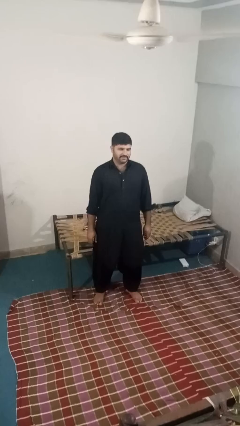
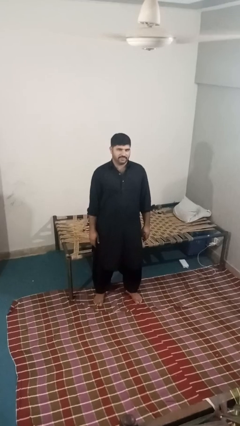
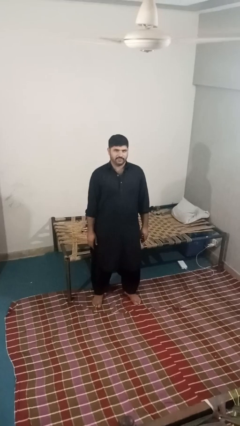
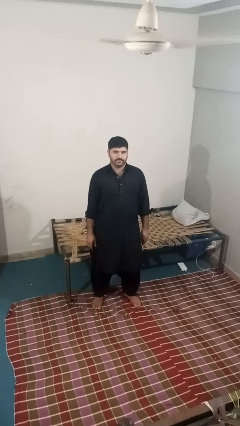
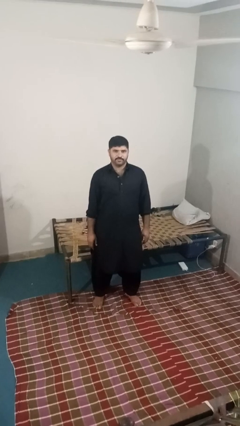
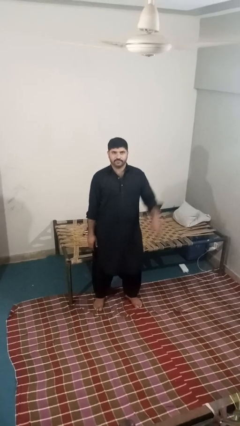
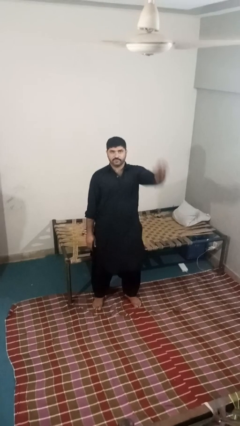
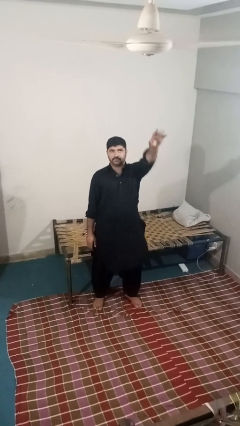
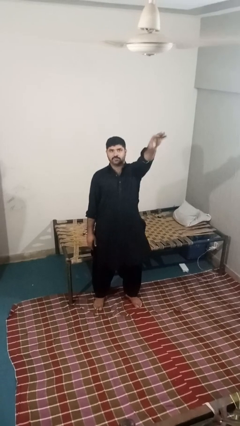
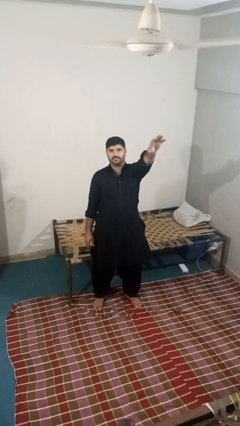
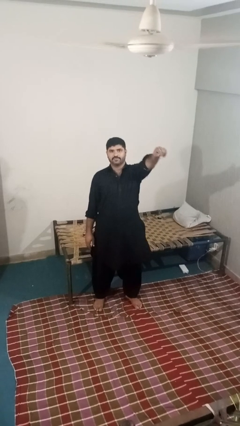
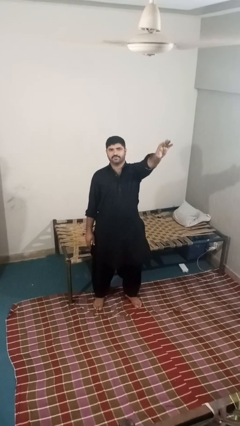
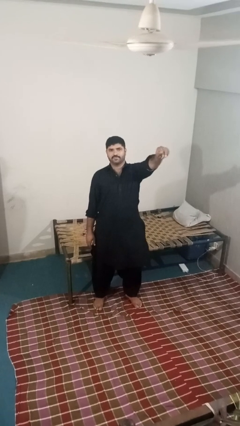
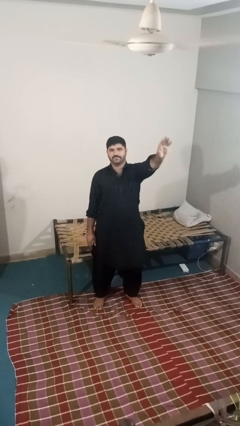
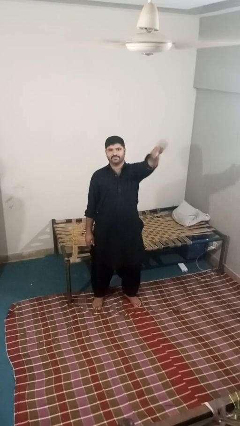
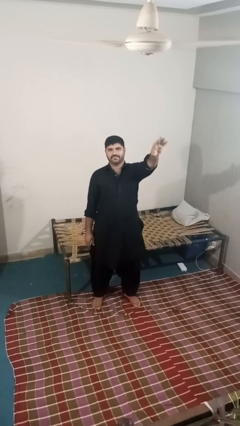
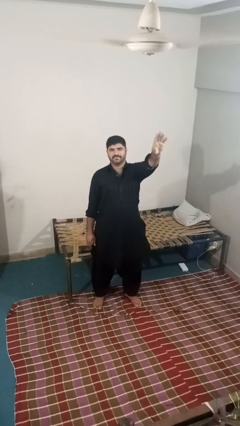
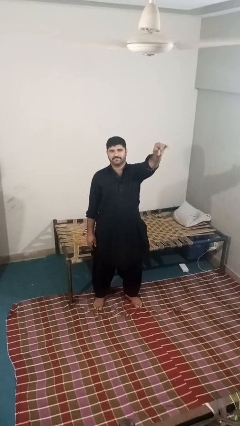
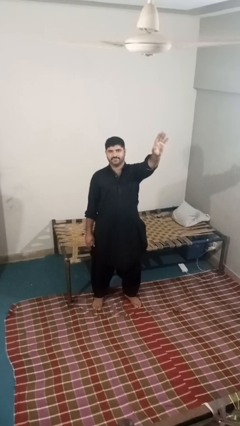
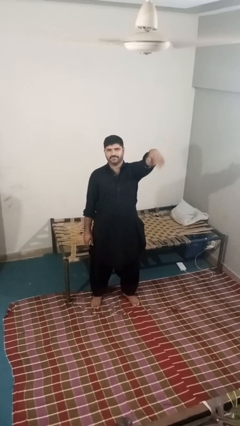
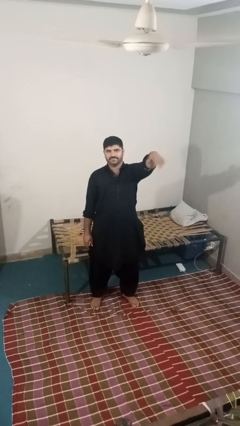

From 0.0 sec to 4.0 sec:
person gestures come here

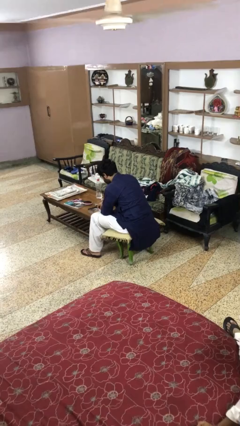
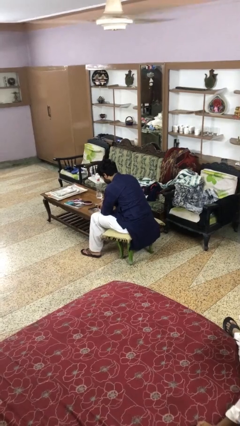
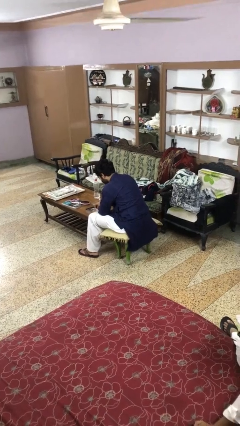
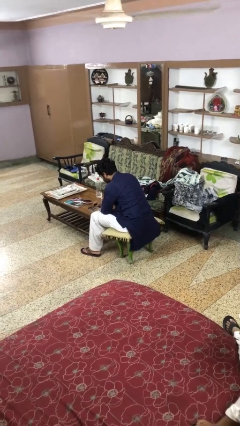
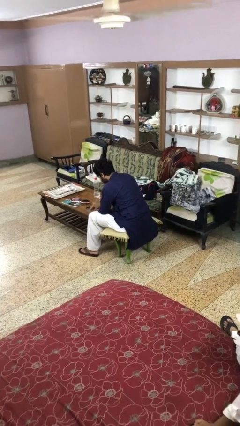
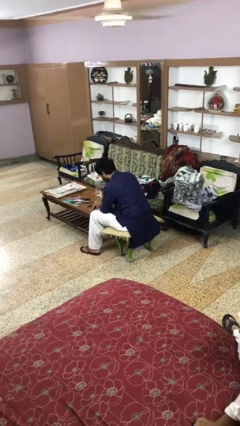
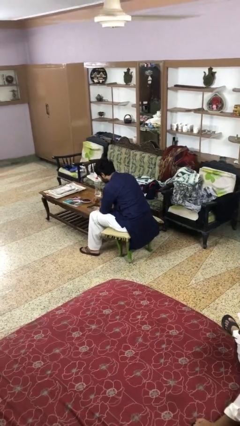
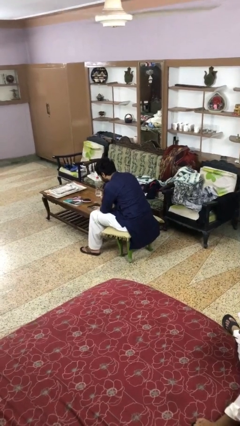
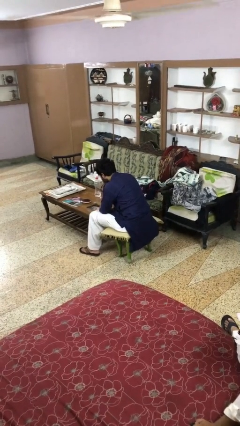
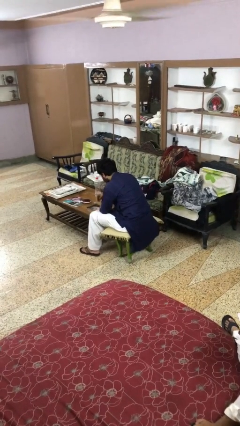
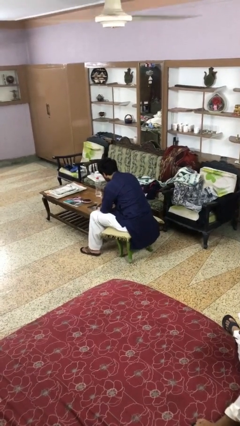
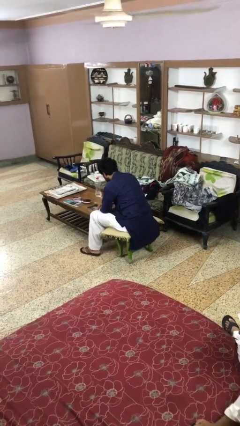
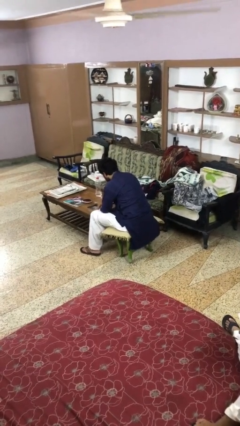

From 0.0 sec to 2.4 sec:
person eats with hands

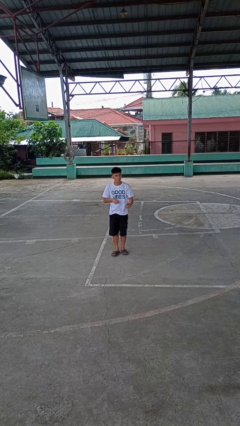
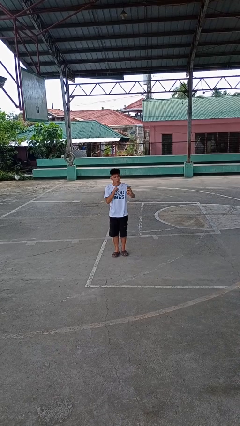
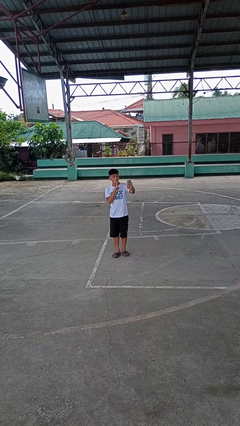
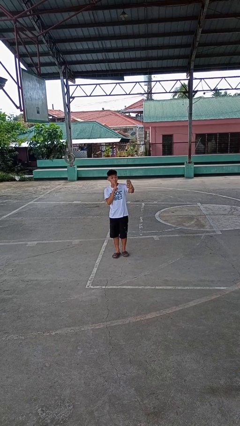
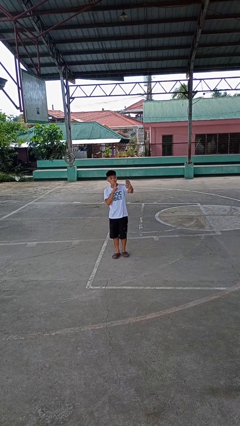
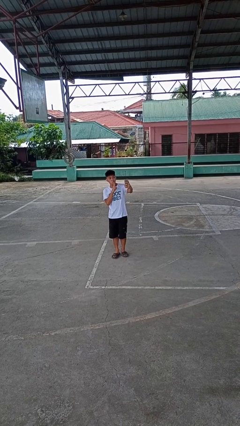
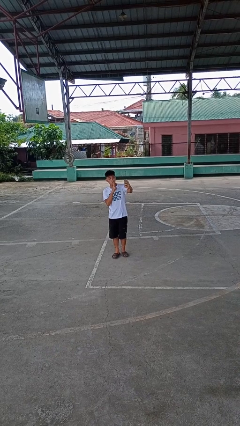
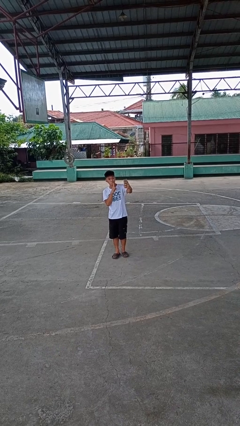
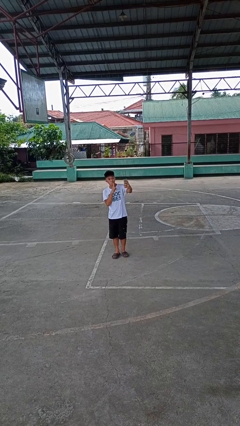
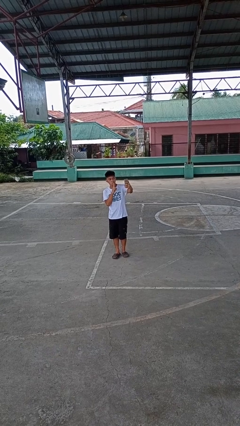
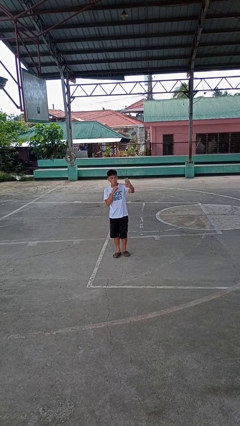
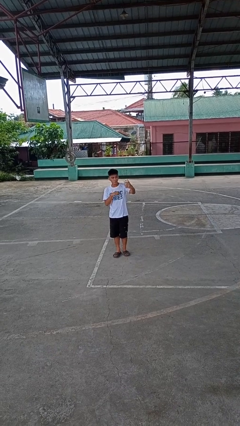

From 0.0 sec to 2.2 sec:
person takes selfie

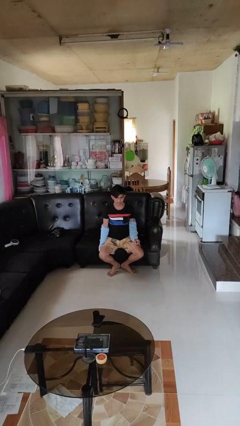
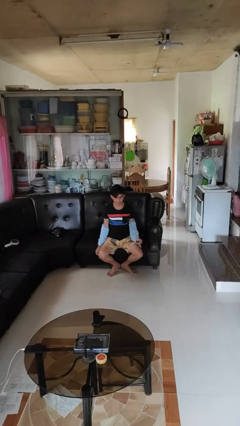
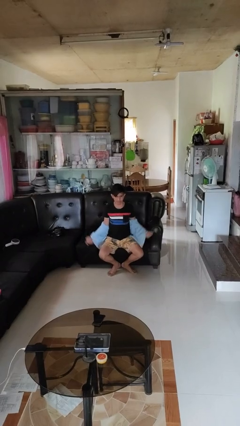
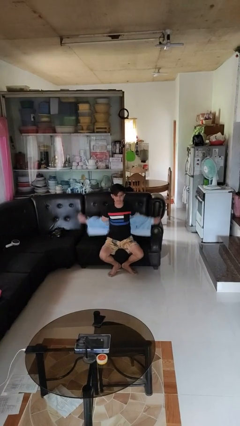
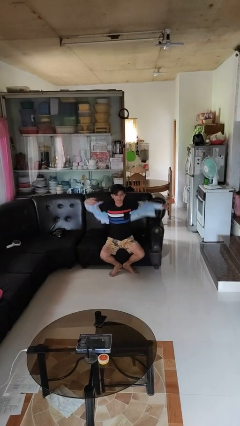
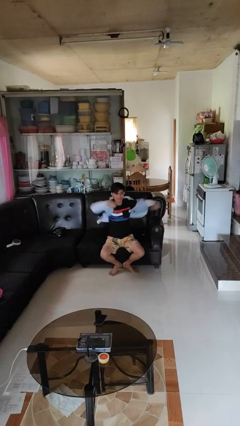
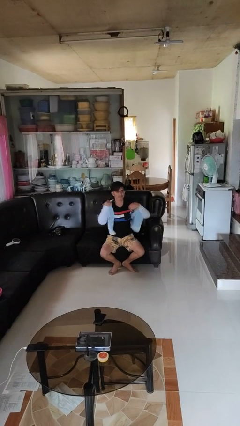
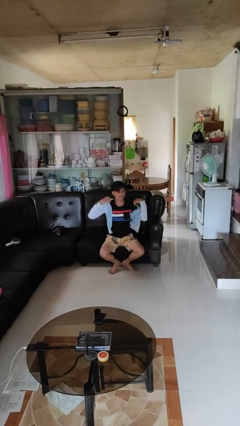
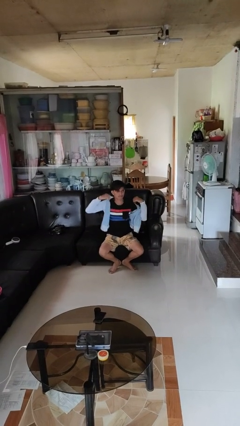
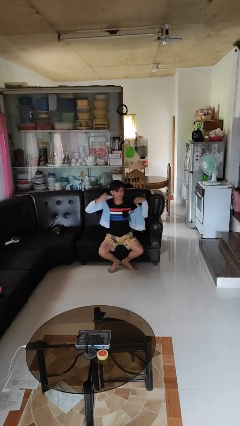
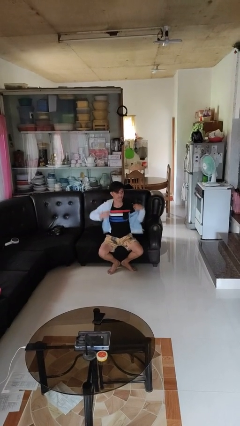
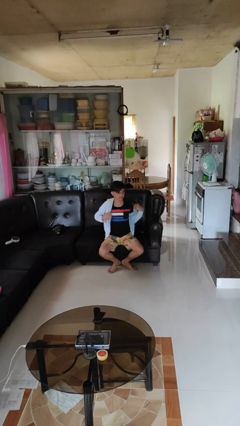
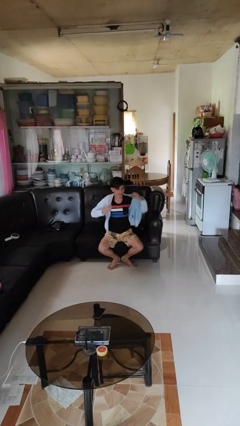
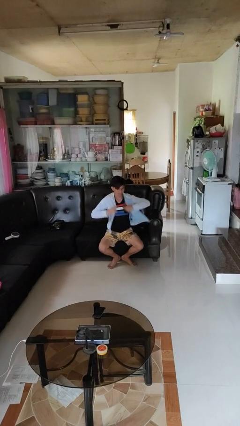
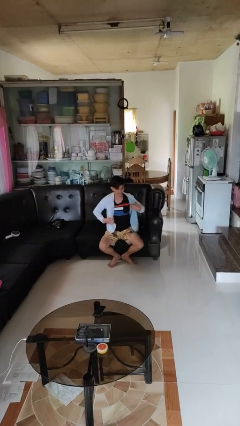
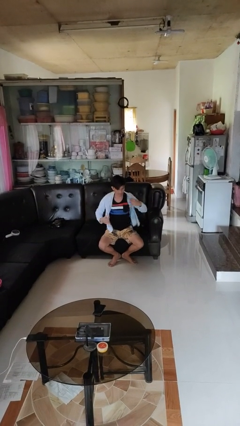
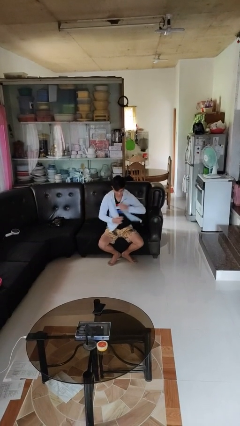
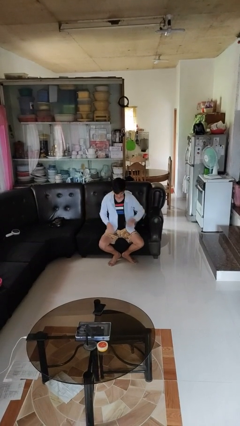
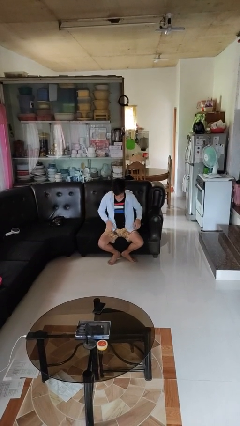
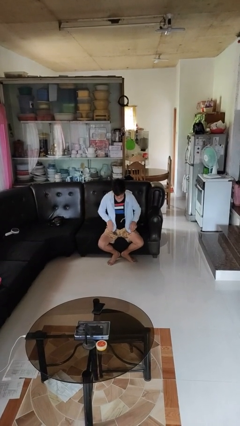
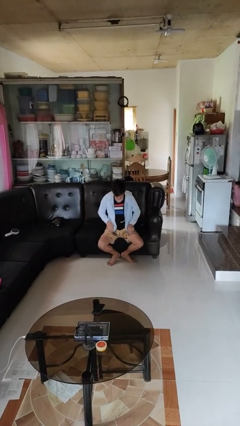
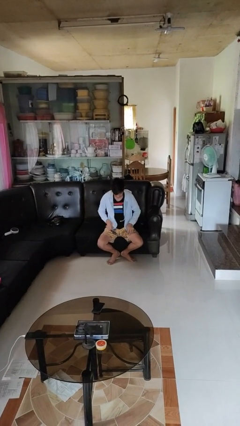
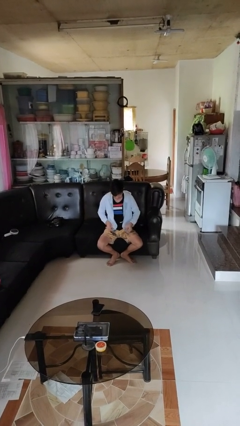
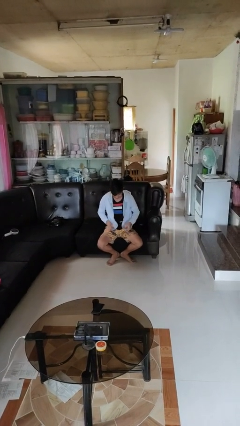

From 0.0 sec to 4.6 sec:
person puts on jacket

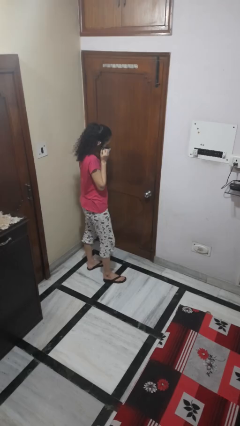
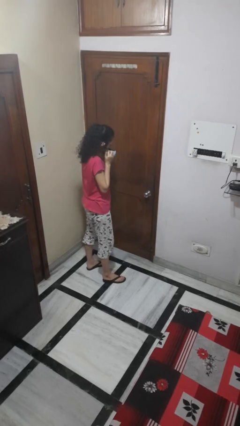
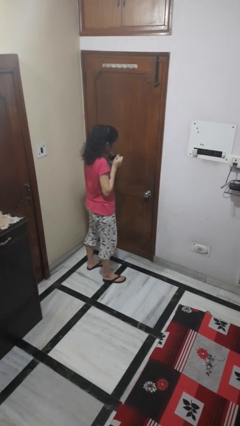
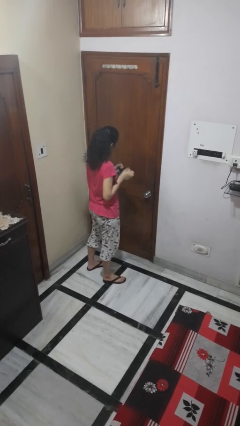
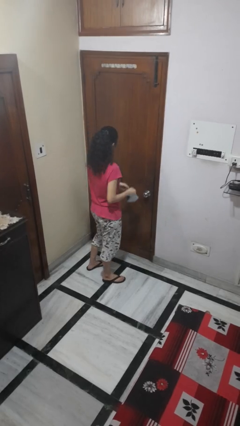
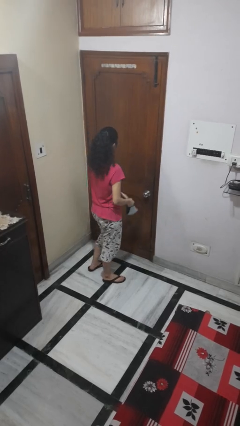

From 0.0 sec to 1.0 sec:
person takes off facemask

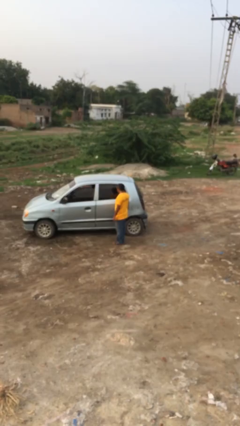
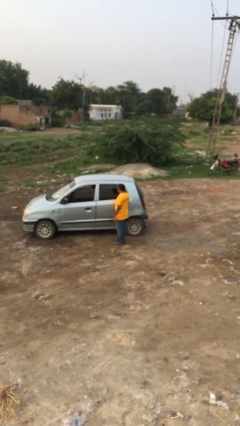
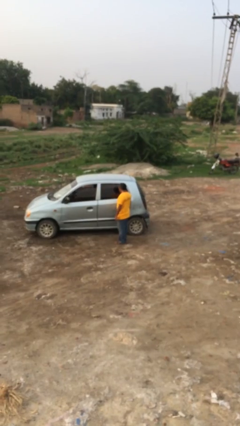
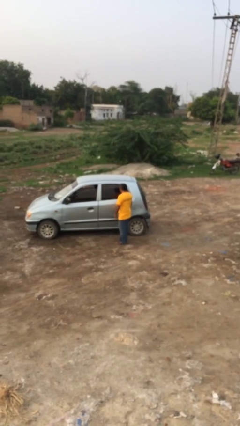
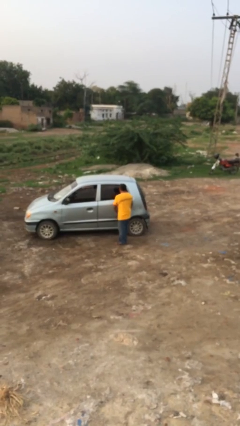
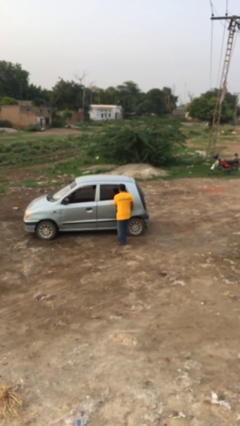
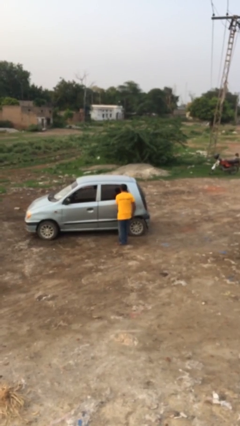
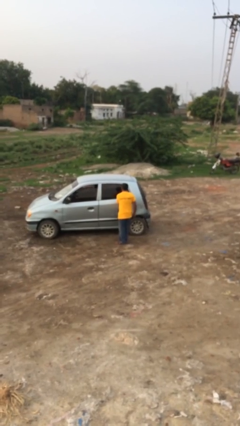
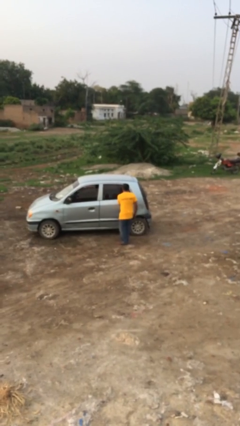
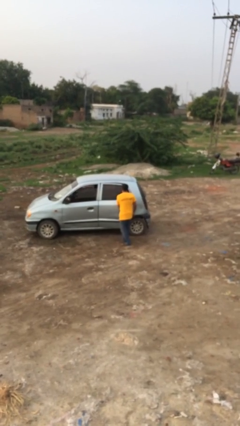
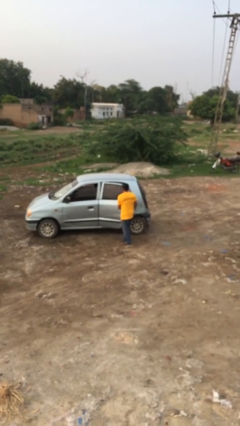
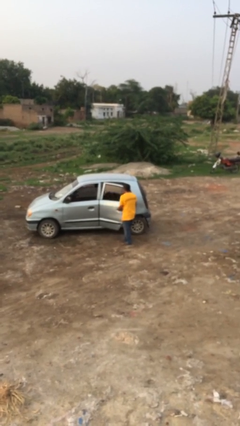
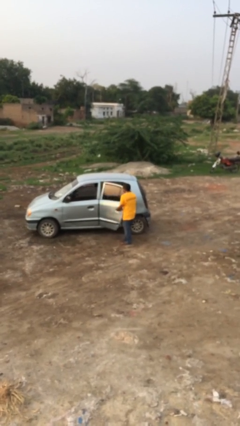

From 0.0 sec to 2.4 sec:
person opens car door

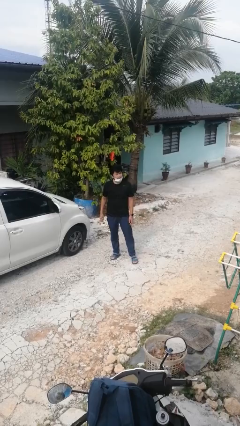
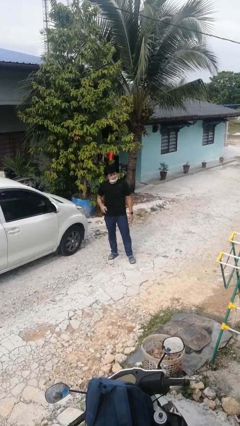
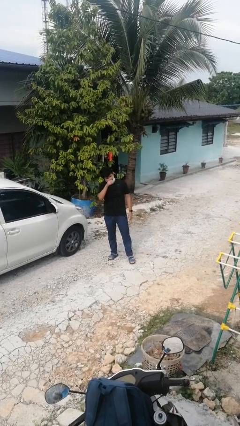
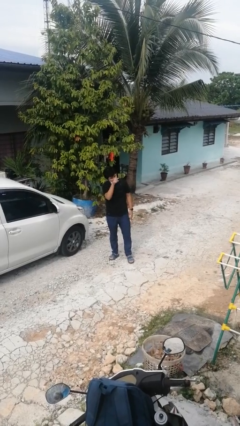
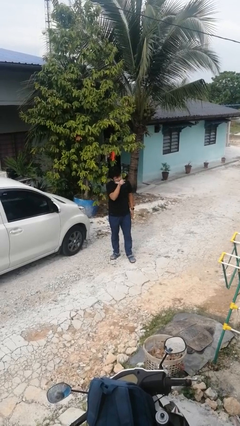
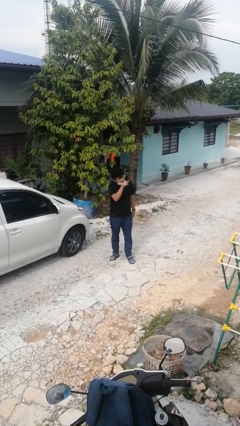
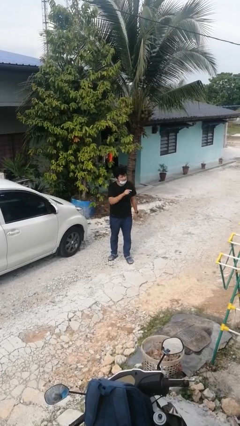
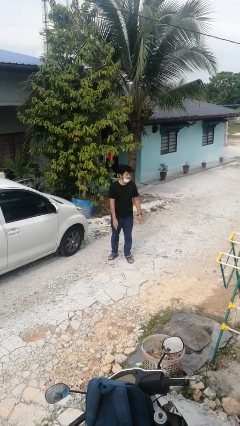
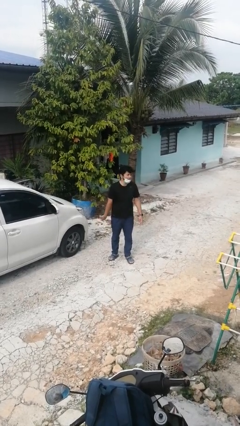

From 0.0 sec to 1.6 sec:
person points at person
